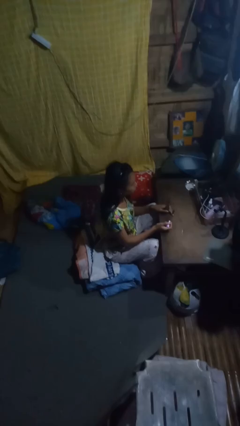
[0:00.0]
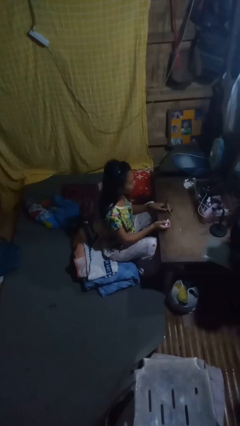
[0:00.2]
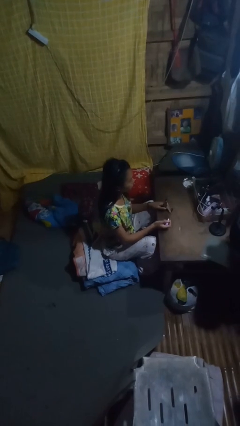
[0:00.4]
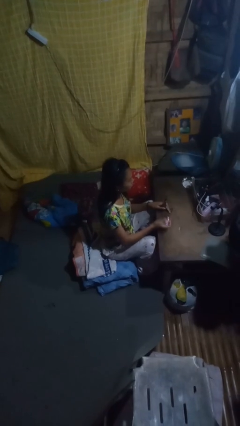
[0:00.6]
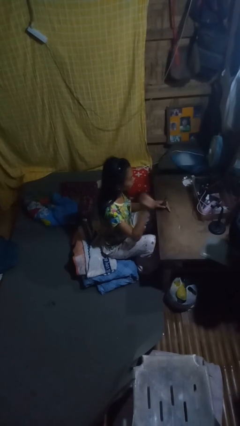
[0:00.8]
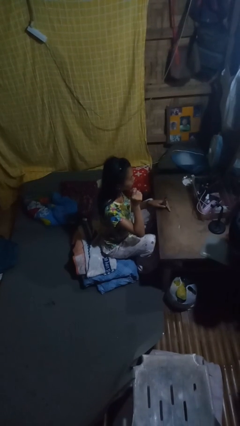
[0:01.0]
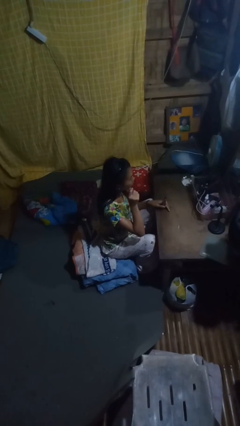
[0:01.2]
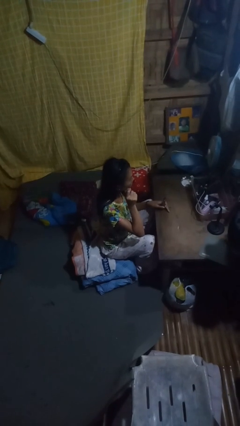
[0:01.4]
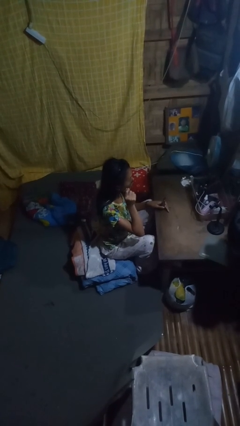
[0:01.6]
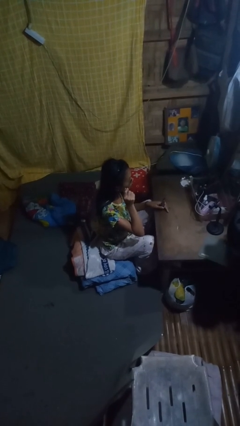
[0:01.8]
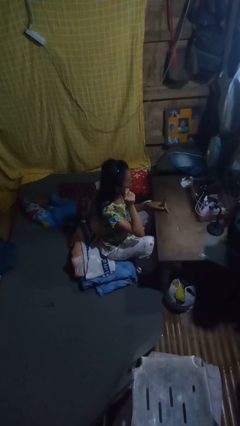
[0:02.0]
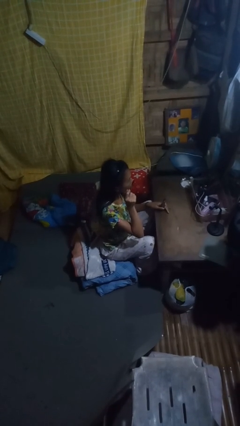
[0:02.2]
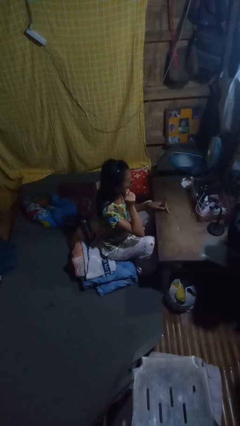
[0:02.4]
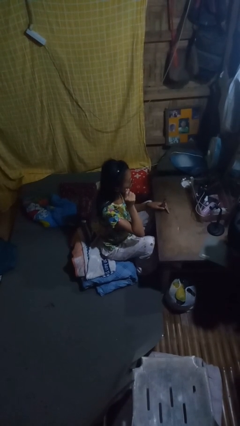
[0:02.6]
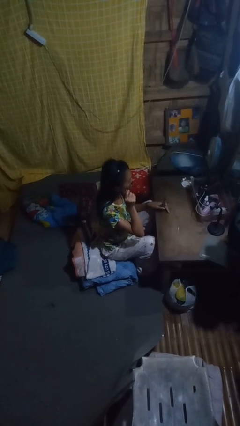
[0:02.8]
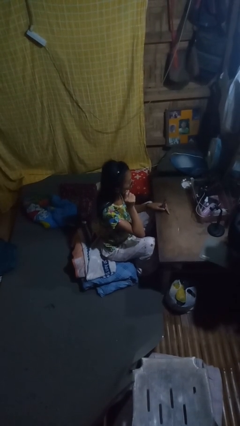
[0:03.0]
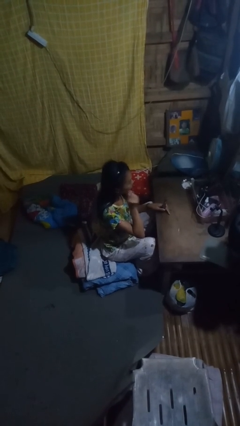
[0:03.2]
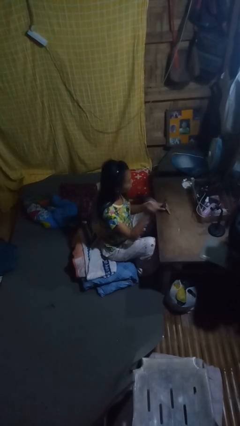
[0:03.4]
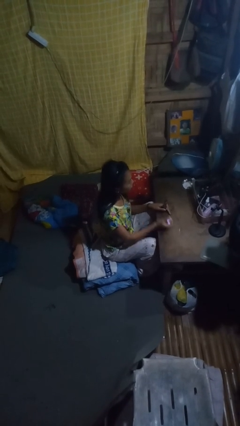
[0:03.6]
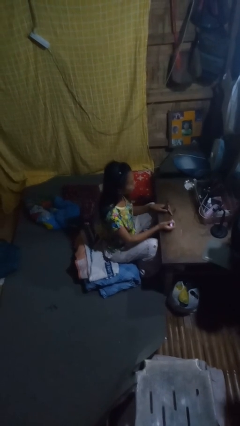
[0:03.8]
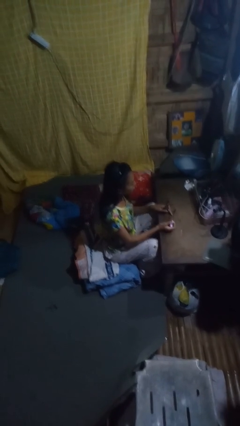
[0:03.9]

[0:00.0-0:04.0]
person applies eye makeup

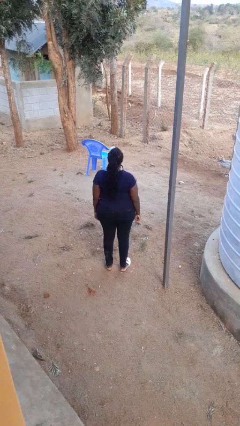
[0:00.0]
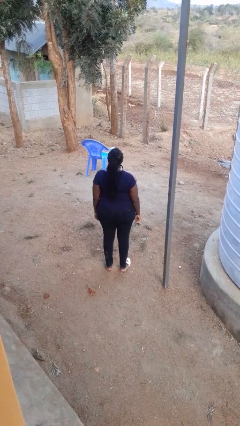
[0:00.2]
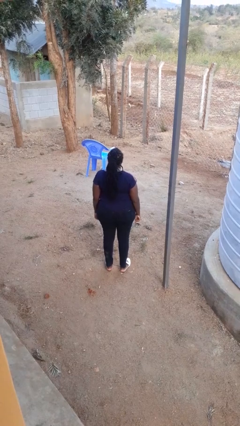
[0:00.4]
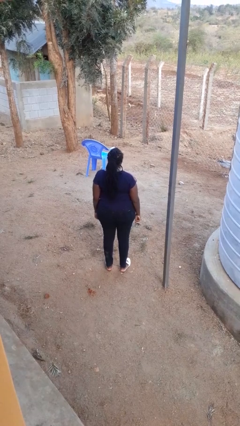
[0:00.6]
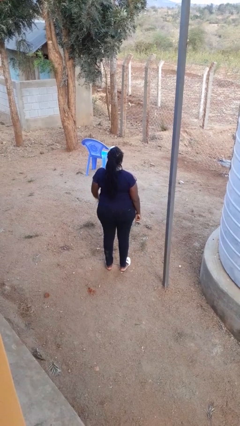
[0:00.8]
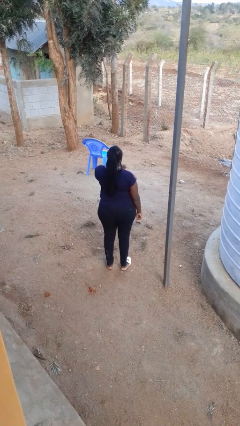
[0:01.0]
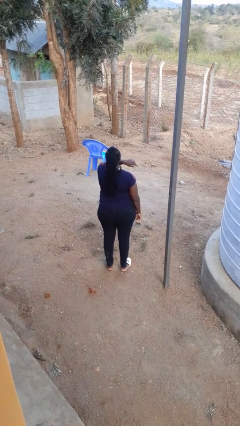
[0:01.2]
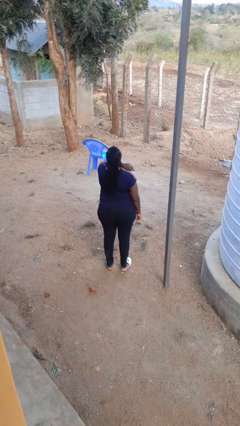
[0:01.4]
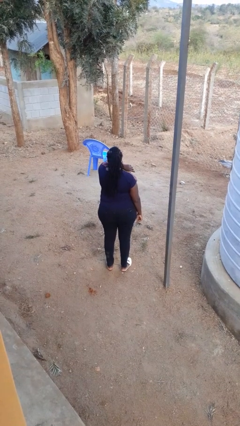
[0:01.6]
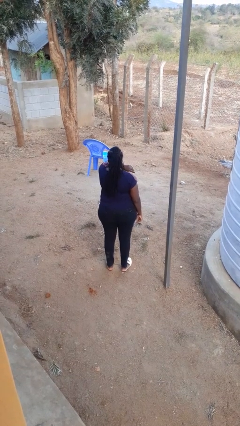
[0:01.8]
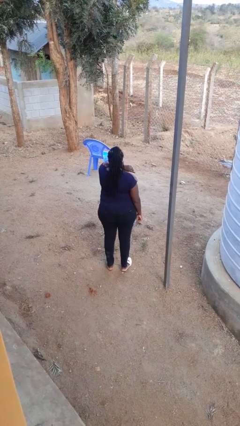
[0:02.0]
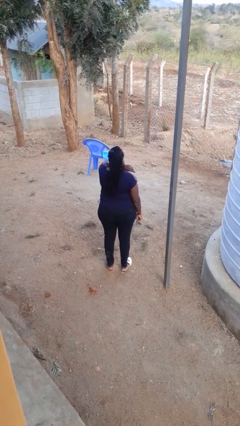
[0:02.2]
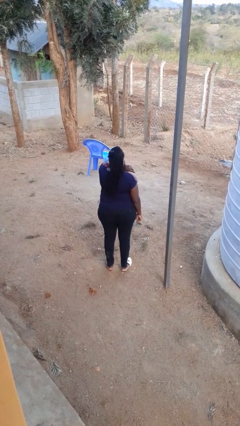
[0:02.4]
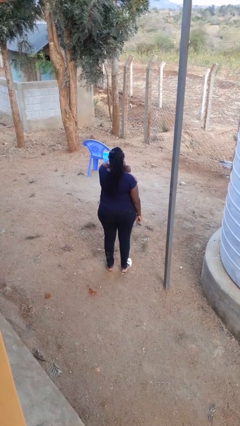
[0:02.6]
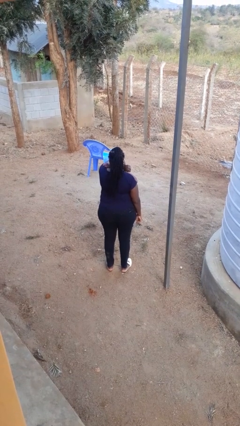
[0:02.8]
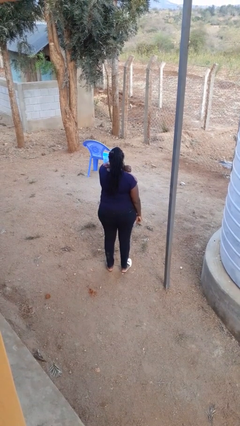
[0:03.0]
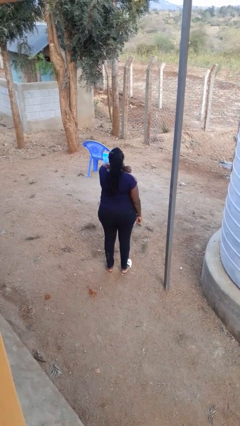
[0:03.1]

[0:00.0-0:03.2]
person sneezes into arm

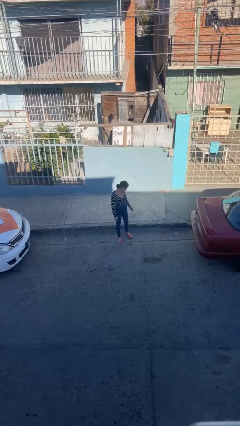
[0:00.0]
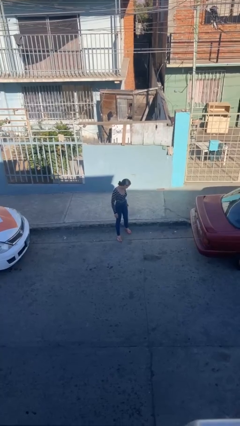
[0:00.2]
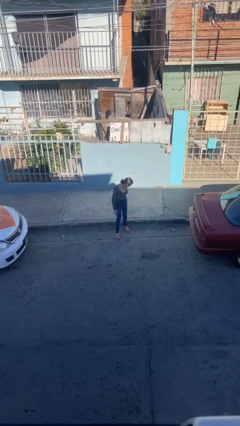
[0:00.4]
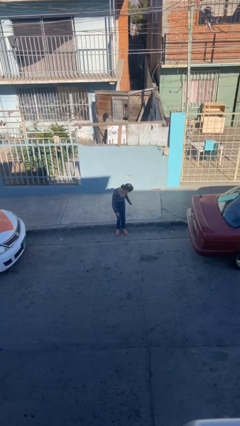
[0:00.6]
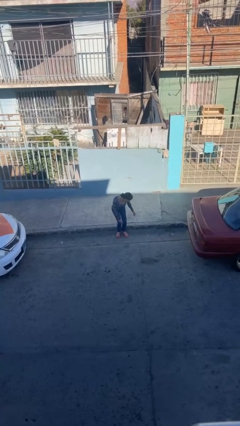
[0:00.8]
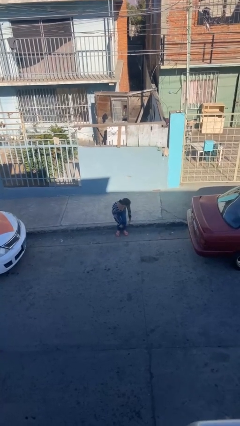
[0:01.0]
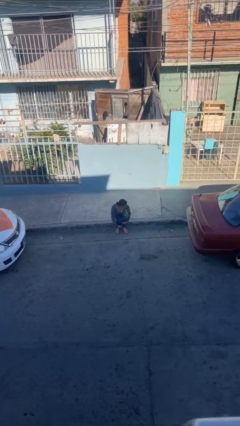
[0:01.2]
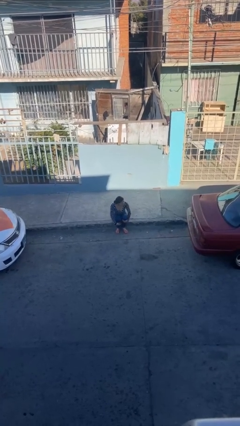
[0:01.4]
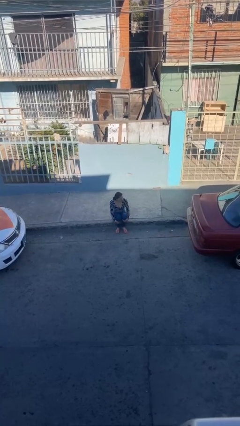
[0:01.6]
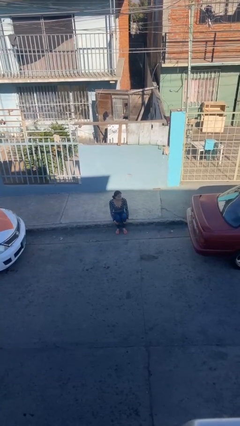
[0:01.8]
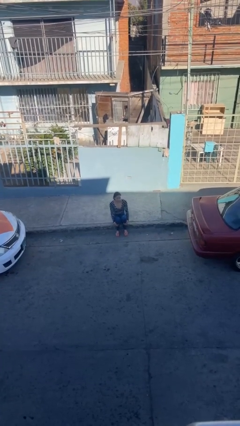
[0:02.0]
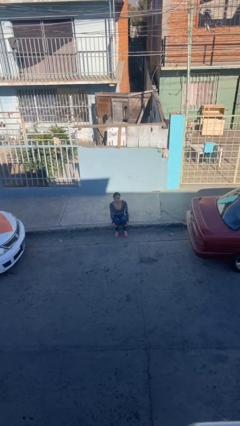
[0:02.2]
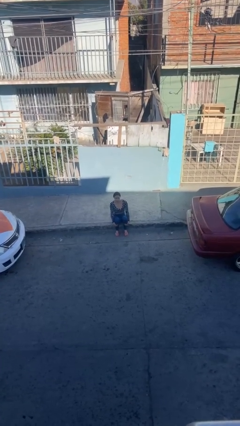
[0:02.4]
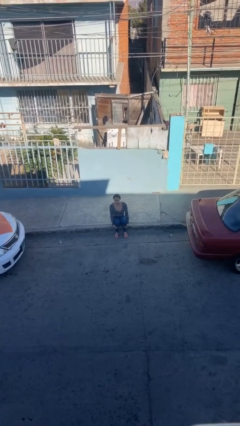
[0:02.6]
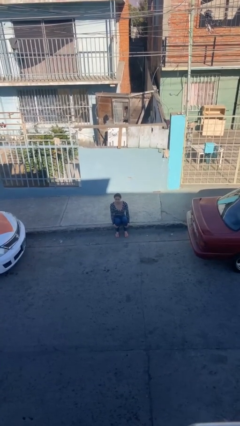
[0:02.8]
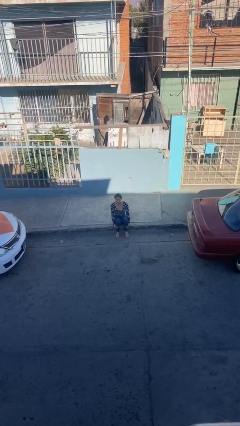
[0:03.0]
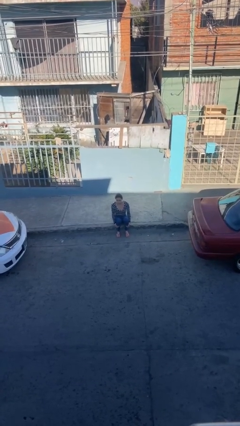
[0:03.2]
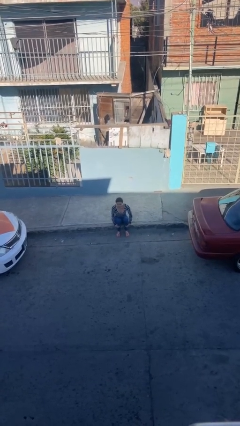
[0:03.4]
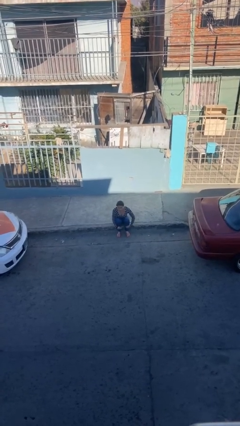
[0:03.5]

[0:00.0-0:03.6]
person sits down

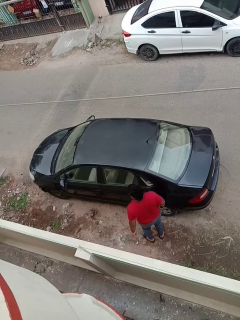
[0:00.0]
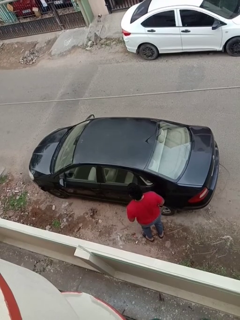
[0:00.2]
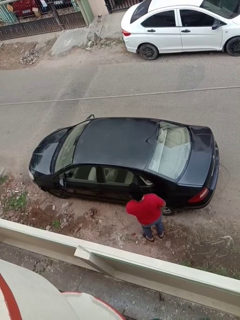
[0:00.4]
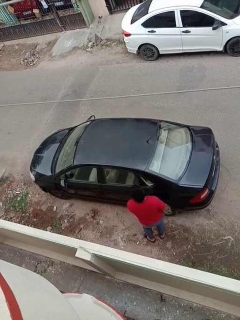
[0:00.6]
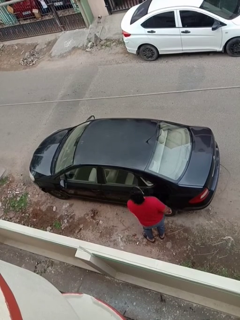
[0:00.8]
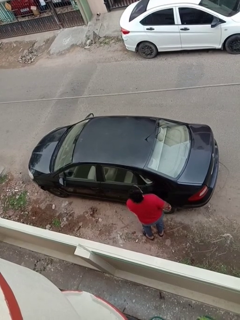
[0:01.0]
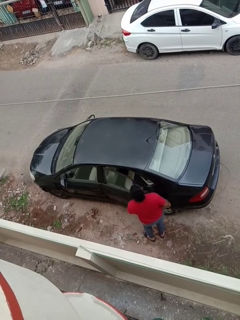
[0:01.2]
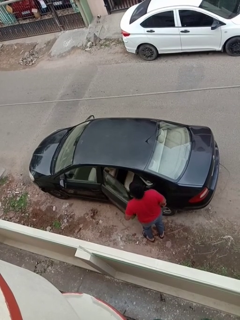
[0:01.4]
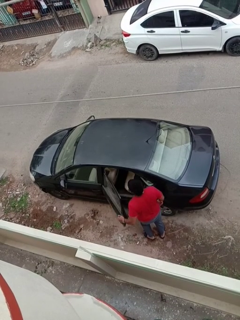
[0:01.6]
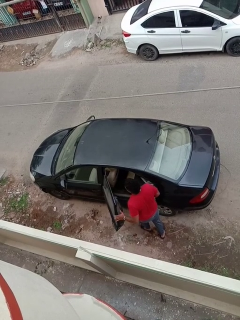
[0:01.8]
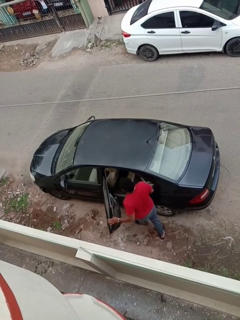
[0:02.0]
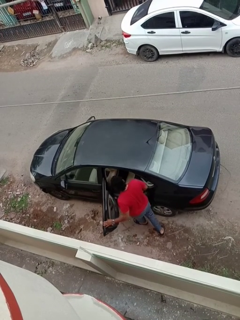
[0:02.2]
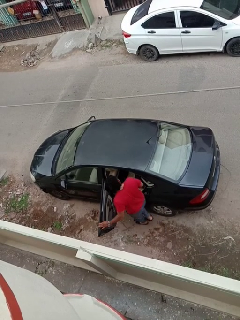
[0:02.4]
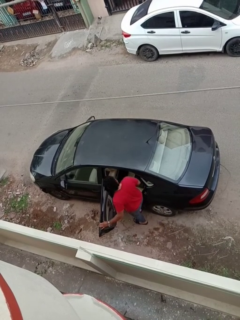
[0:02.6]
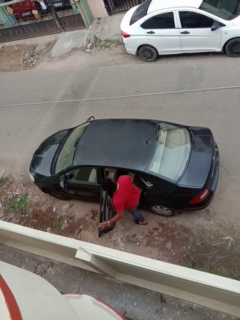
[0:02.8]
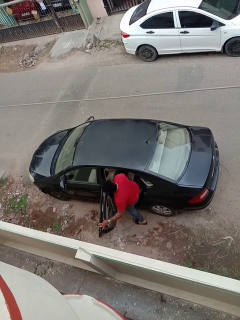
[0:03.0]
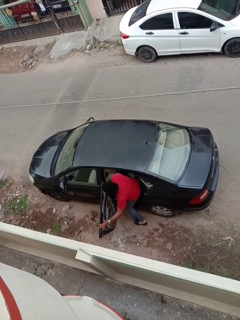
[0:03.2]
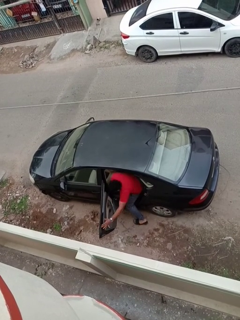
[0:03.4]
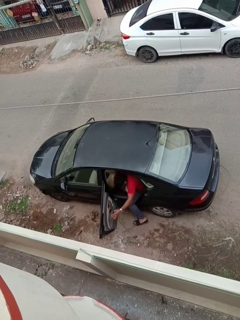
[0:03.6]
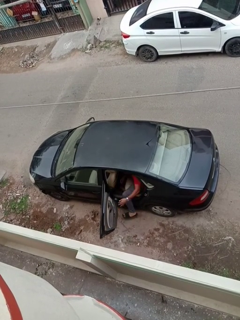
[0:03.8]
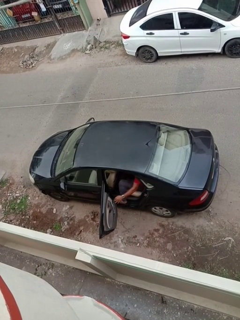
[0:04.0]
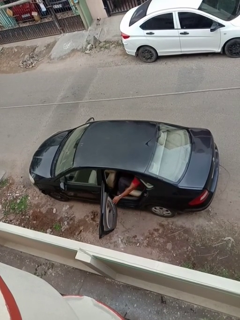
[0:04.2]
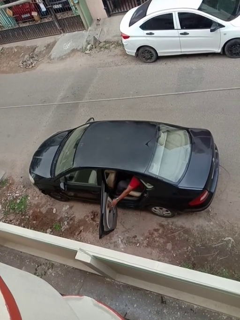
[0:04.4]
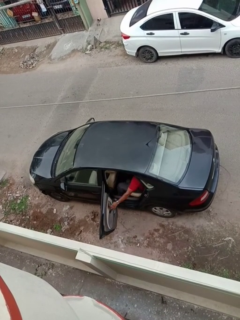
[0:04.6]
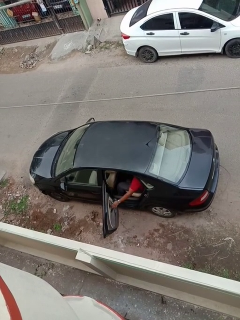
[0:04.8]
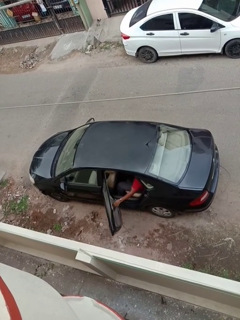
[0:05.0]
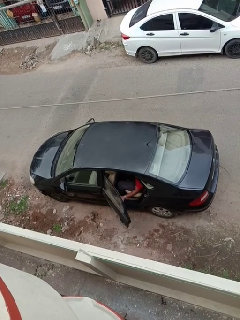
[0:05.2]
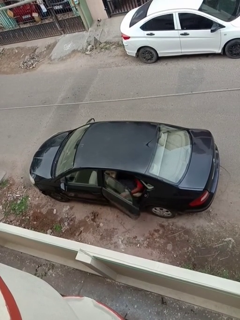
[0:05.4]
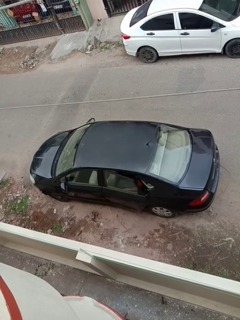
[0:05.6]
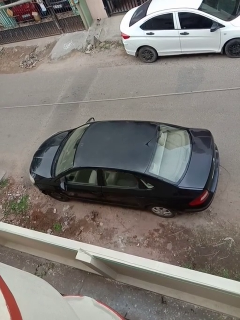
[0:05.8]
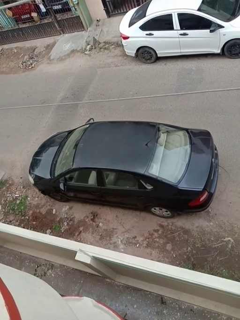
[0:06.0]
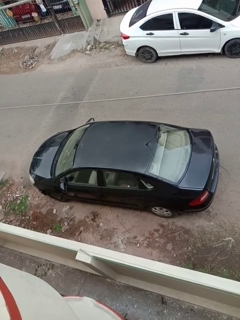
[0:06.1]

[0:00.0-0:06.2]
car picks up person

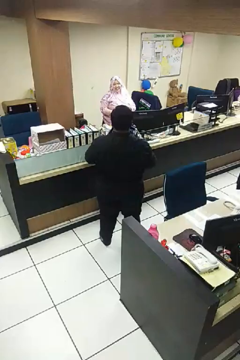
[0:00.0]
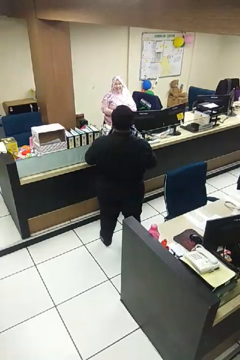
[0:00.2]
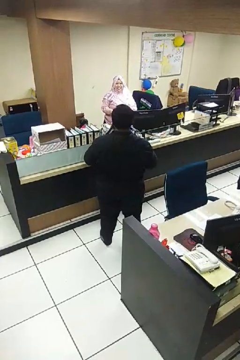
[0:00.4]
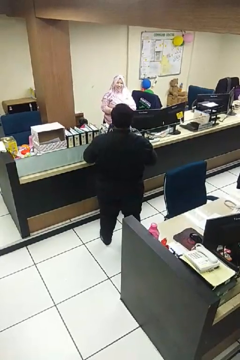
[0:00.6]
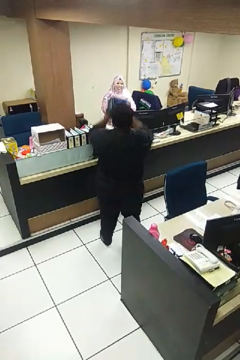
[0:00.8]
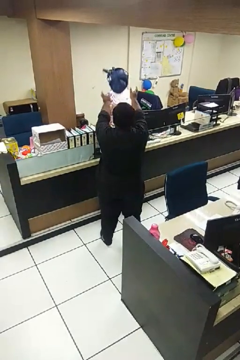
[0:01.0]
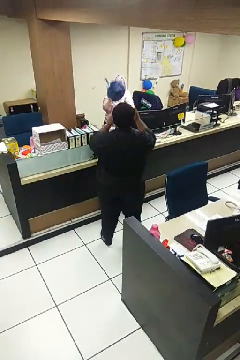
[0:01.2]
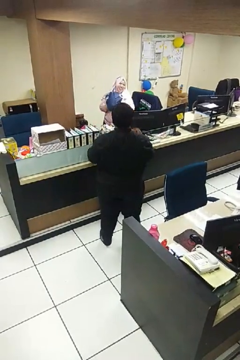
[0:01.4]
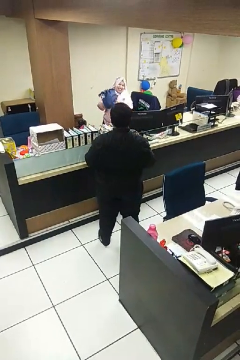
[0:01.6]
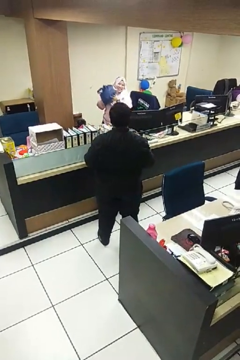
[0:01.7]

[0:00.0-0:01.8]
person throws object to person

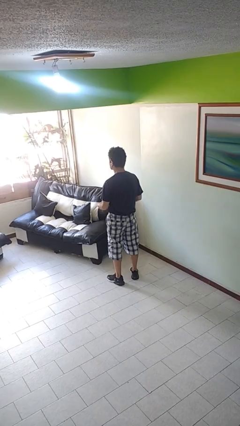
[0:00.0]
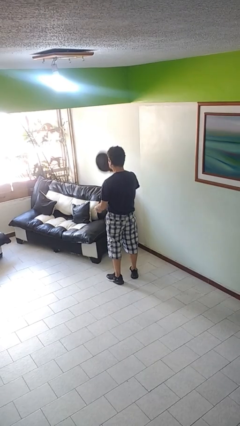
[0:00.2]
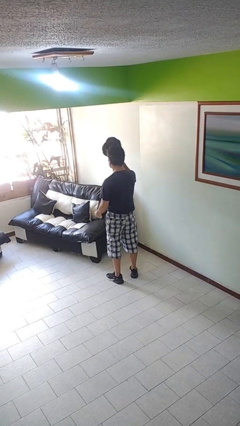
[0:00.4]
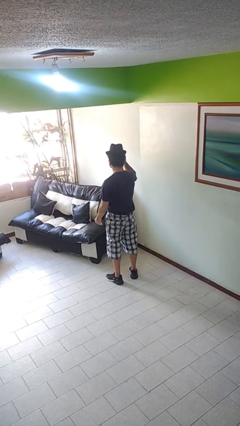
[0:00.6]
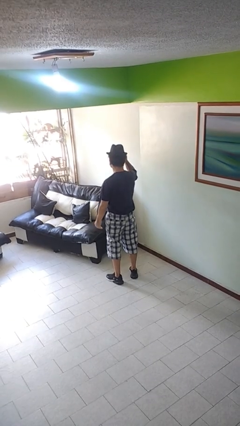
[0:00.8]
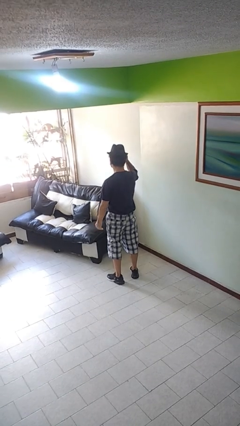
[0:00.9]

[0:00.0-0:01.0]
person puts on hat
